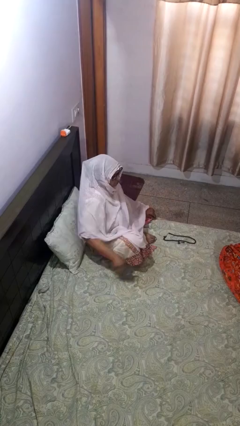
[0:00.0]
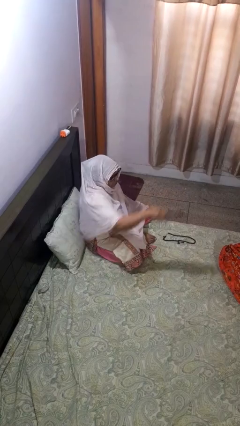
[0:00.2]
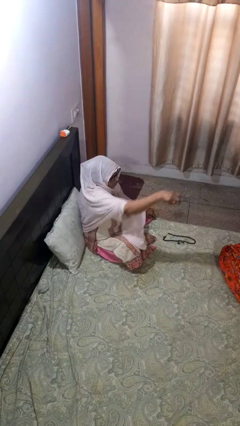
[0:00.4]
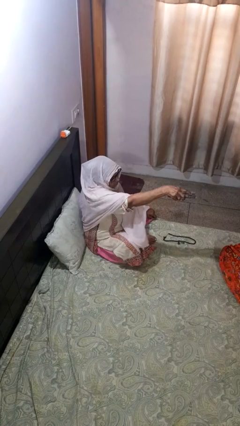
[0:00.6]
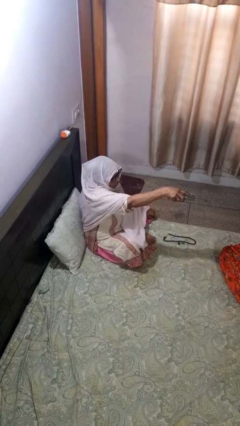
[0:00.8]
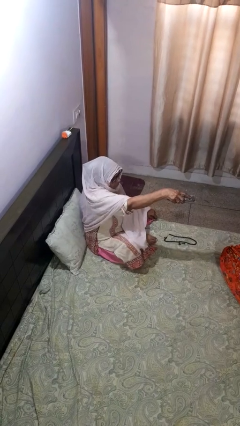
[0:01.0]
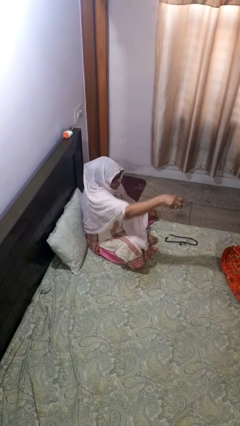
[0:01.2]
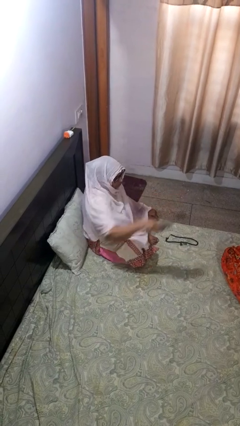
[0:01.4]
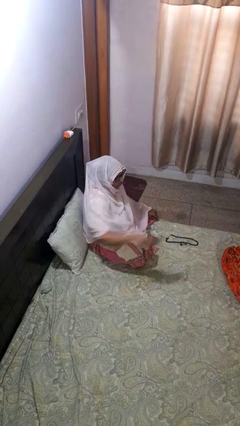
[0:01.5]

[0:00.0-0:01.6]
person uses television remote

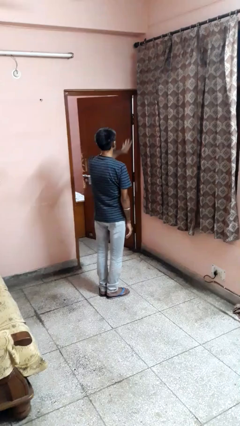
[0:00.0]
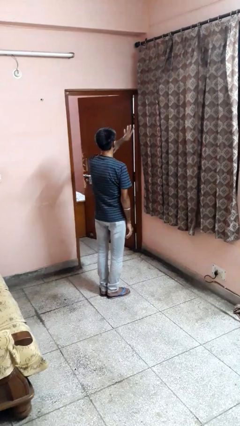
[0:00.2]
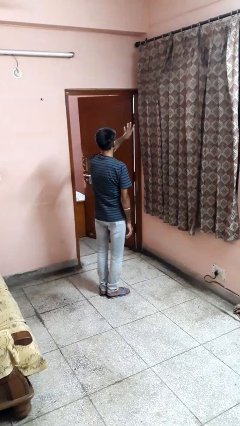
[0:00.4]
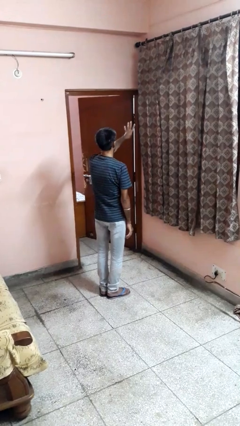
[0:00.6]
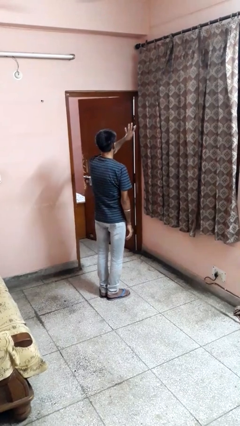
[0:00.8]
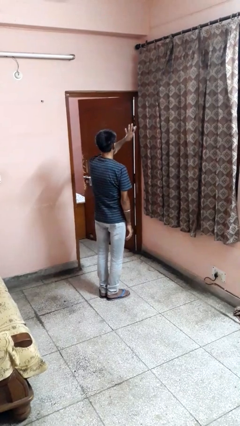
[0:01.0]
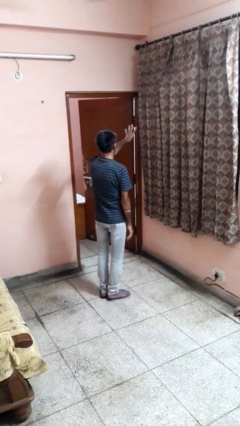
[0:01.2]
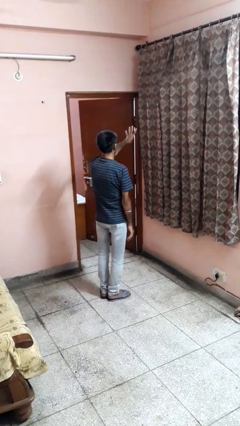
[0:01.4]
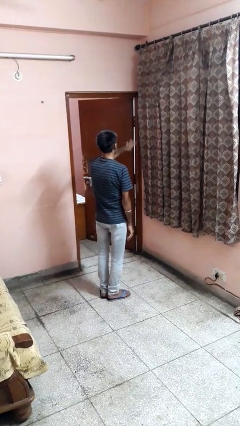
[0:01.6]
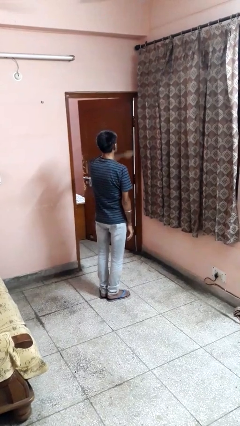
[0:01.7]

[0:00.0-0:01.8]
person gestures number four

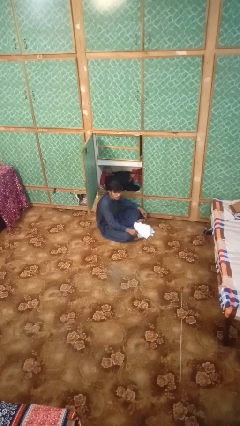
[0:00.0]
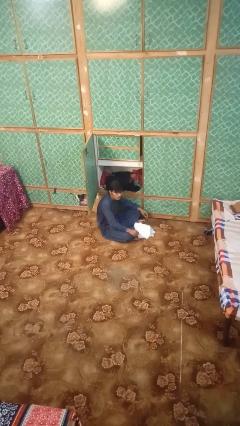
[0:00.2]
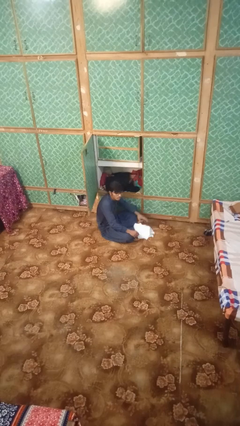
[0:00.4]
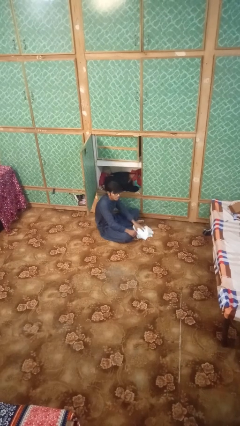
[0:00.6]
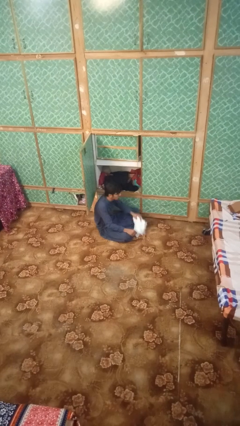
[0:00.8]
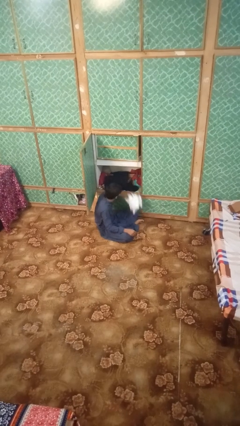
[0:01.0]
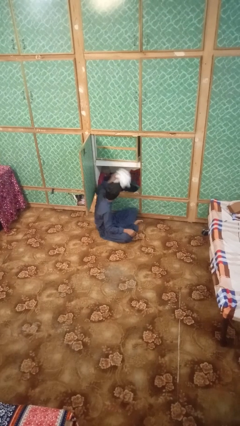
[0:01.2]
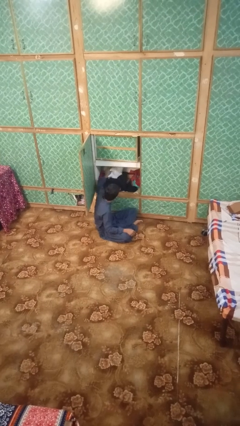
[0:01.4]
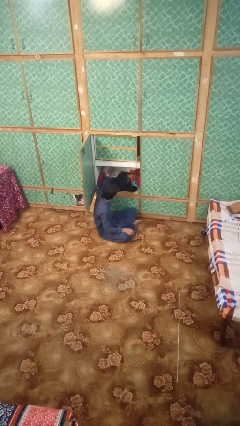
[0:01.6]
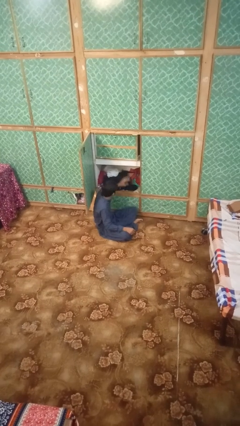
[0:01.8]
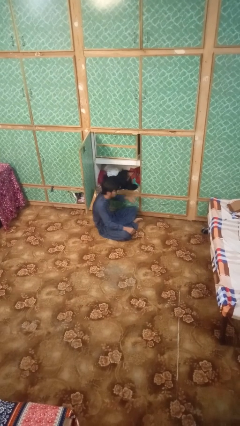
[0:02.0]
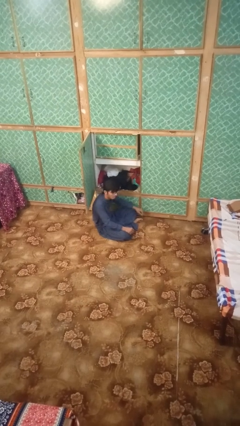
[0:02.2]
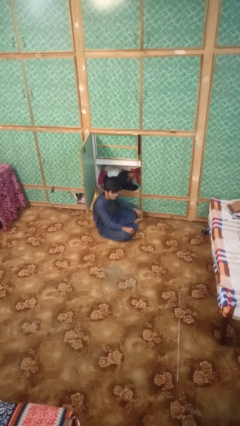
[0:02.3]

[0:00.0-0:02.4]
person puts clothes into dresser

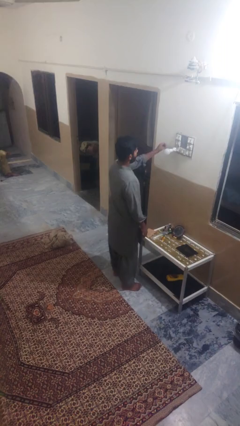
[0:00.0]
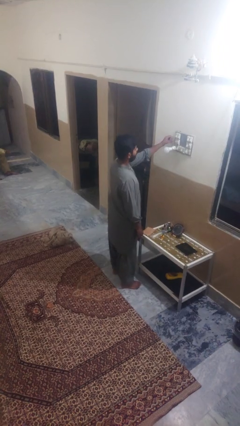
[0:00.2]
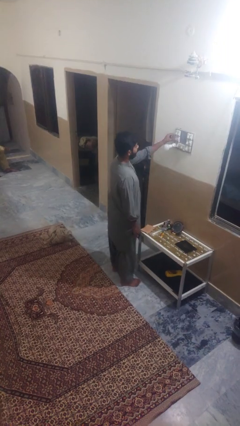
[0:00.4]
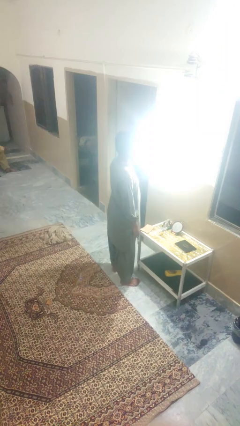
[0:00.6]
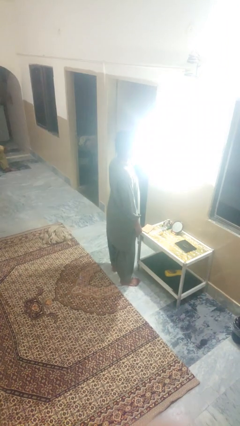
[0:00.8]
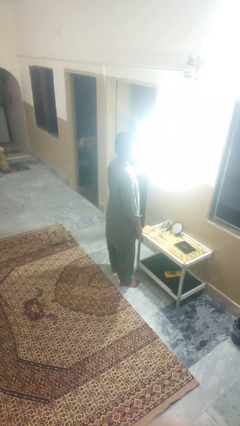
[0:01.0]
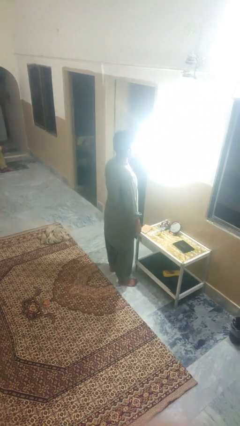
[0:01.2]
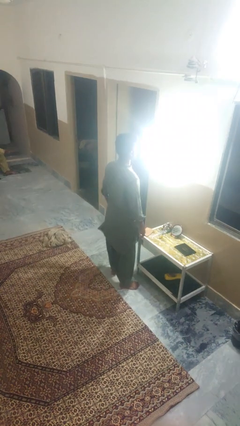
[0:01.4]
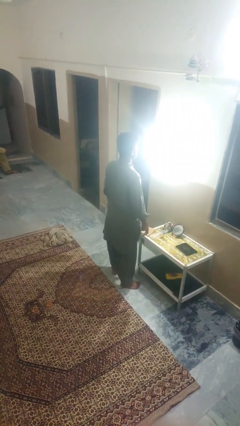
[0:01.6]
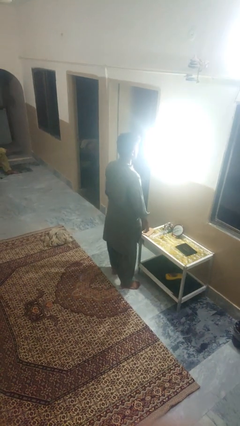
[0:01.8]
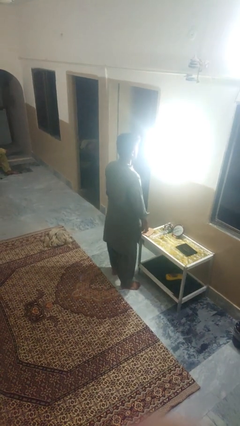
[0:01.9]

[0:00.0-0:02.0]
person turns on lamp

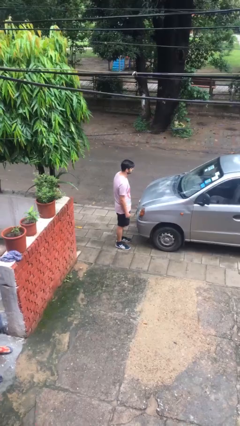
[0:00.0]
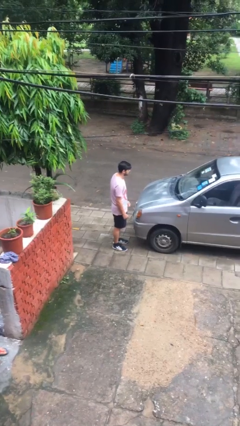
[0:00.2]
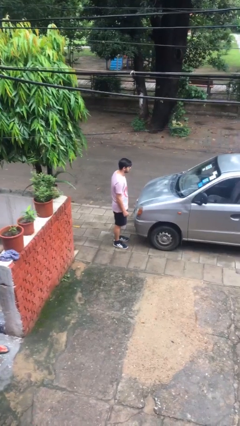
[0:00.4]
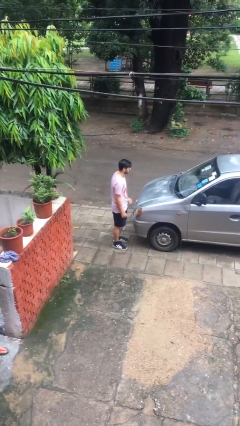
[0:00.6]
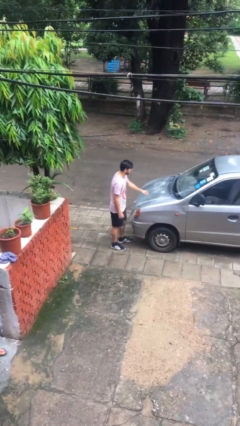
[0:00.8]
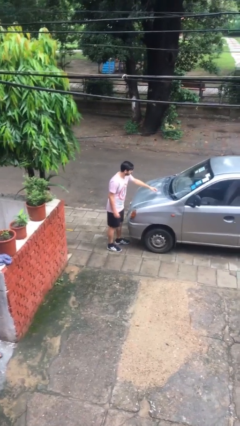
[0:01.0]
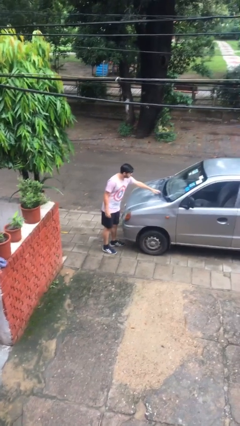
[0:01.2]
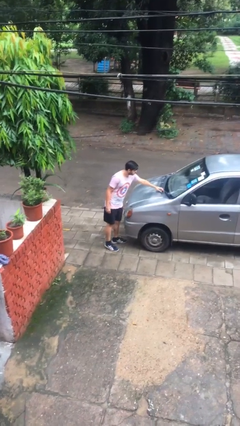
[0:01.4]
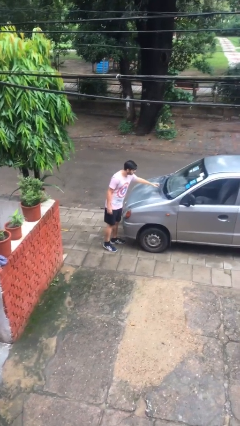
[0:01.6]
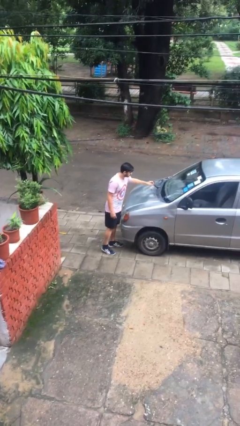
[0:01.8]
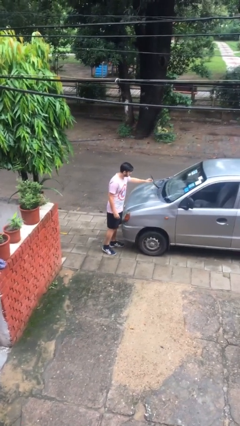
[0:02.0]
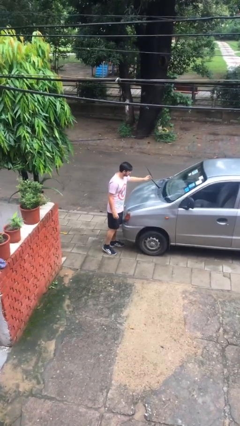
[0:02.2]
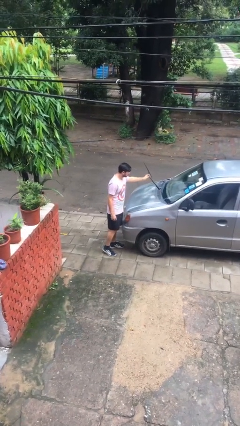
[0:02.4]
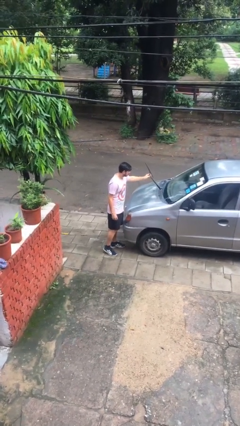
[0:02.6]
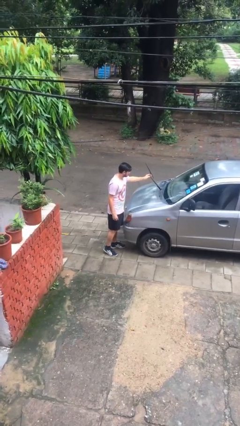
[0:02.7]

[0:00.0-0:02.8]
person flips up car wipers

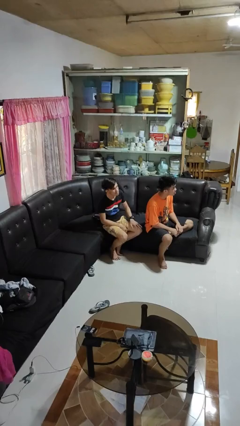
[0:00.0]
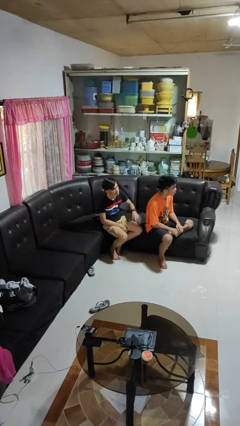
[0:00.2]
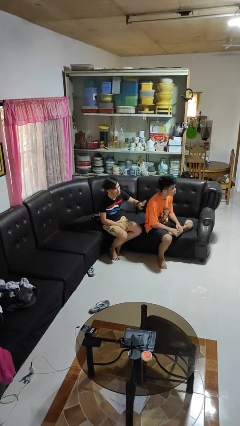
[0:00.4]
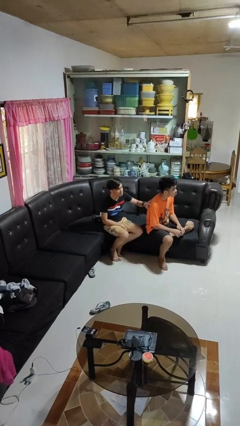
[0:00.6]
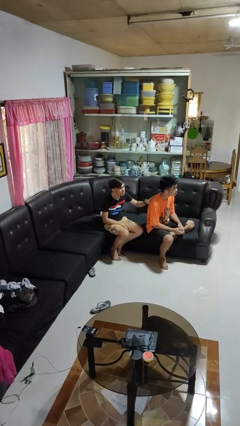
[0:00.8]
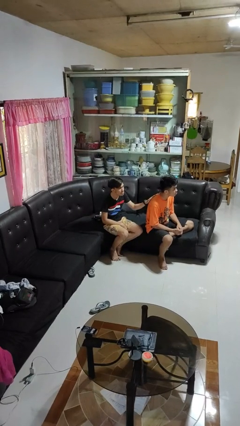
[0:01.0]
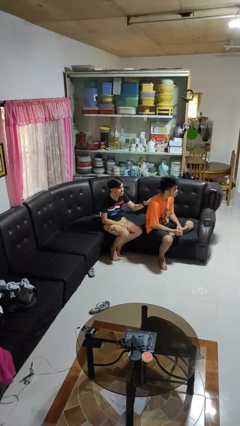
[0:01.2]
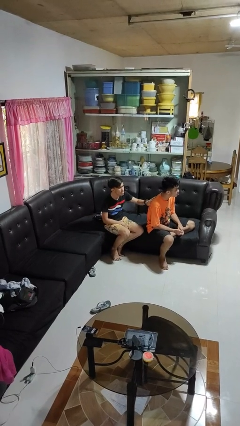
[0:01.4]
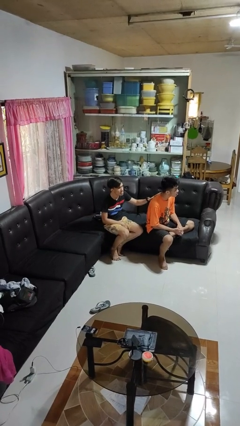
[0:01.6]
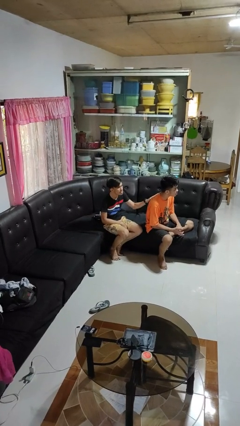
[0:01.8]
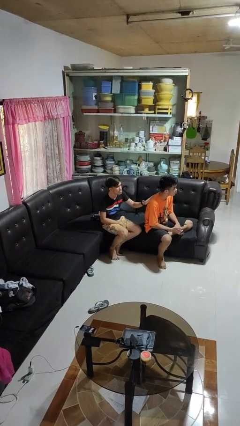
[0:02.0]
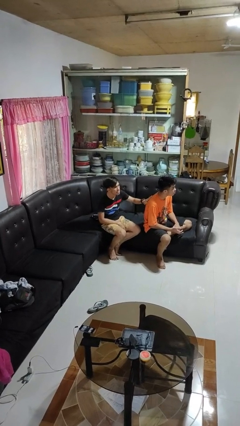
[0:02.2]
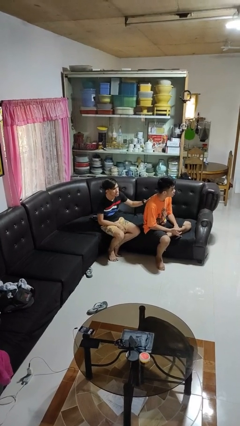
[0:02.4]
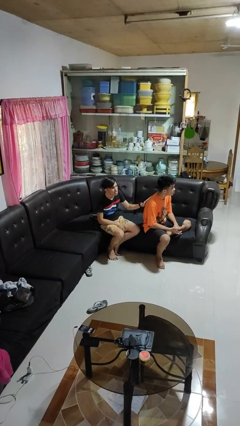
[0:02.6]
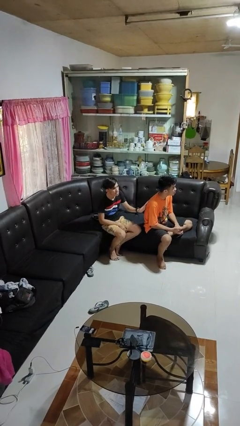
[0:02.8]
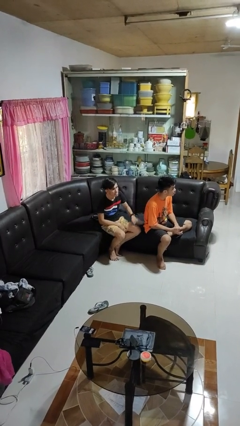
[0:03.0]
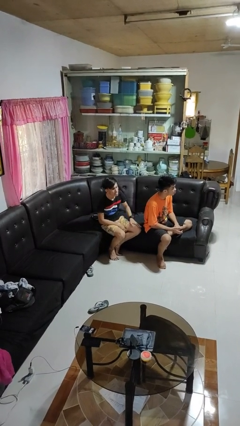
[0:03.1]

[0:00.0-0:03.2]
person touches back of person

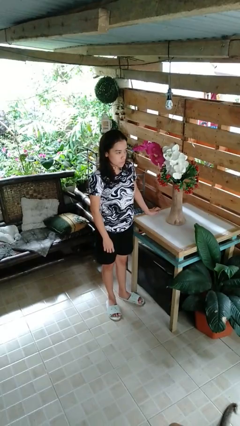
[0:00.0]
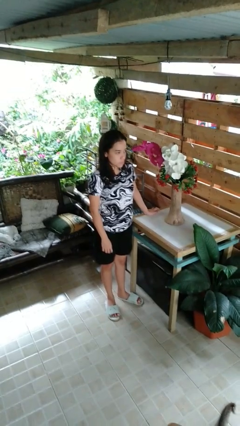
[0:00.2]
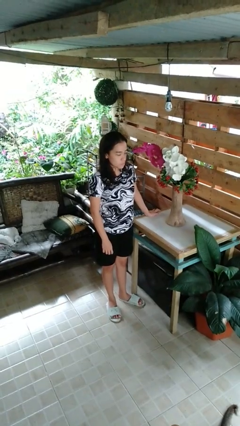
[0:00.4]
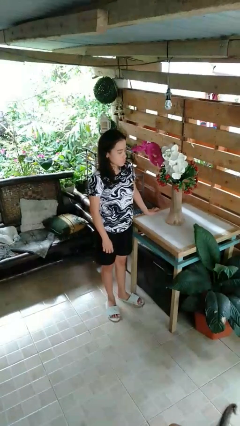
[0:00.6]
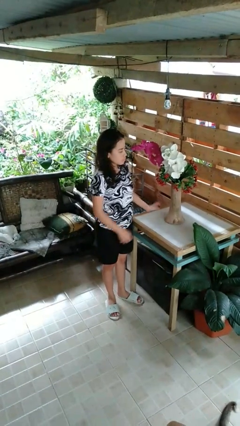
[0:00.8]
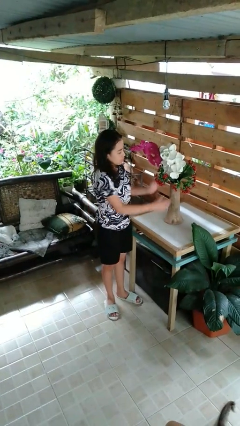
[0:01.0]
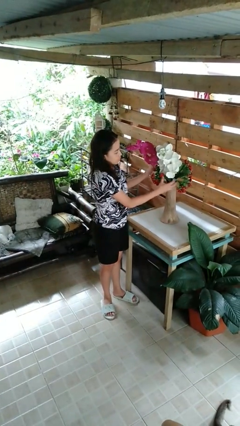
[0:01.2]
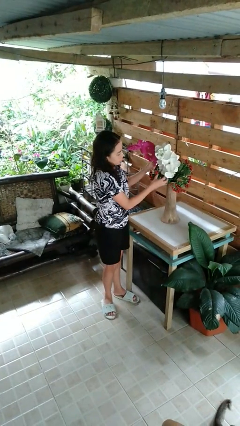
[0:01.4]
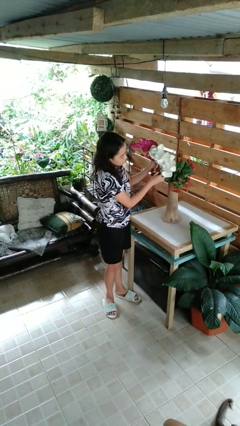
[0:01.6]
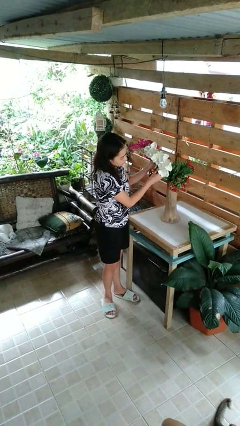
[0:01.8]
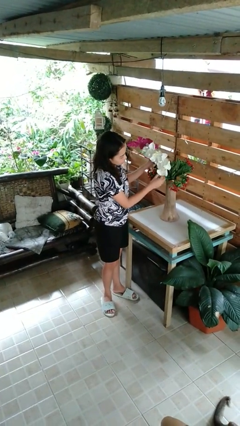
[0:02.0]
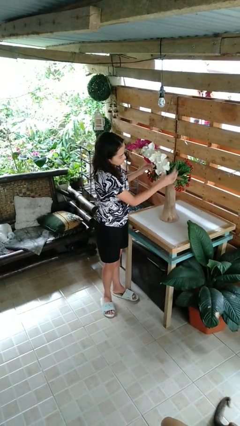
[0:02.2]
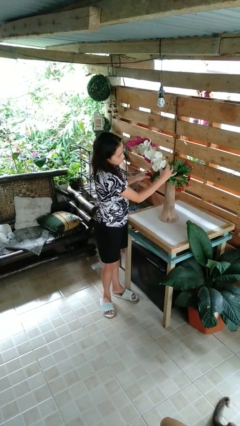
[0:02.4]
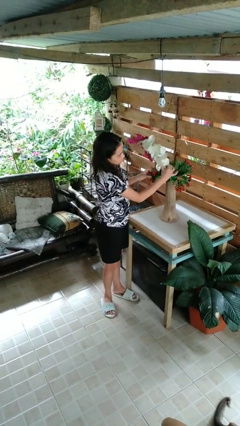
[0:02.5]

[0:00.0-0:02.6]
person arranges flowers in vase

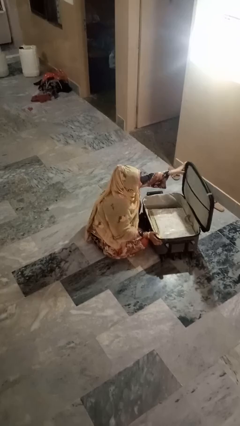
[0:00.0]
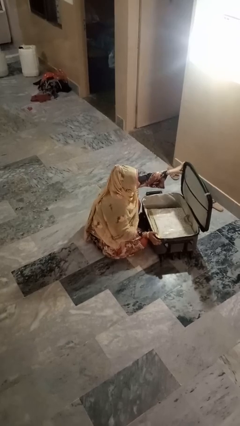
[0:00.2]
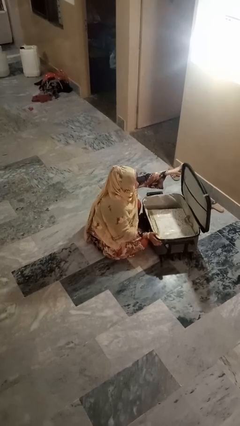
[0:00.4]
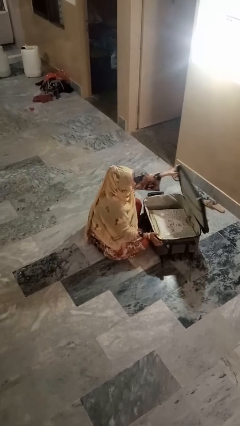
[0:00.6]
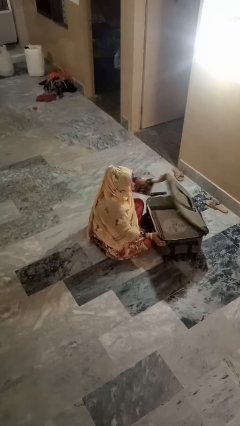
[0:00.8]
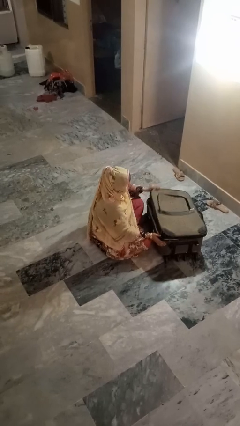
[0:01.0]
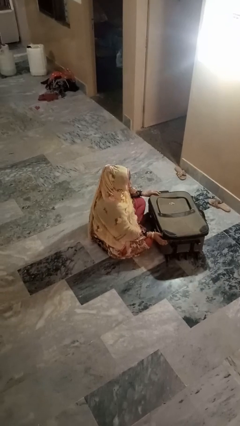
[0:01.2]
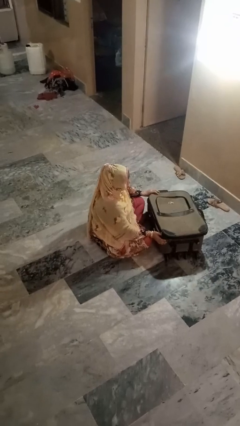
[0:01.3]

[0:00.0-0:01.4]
person closes suitcase
